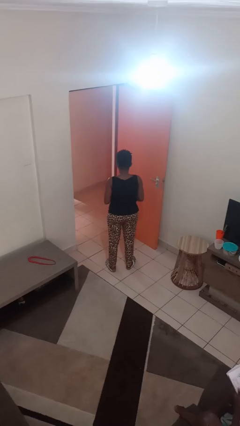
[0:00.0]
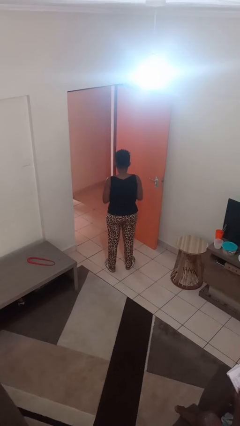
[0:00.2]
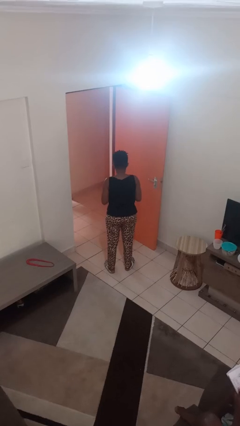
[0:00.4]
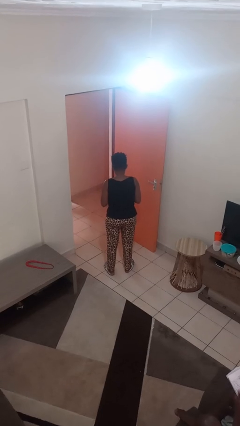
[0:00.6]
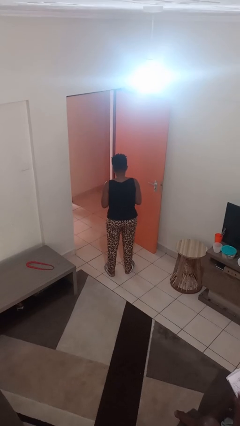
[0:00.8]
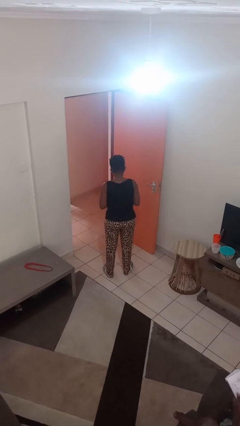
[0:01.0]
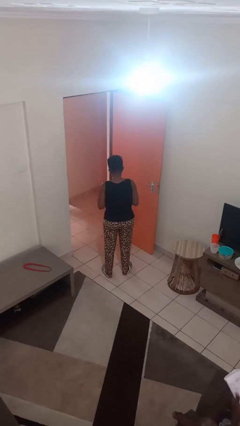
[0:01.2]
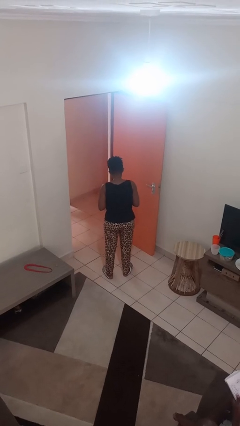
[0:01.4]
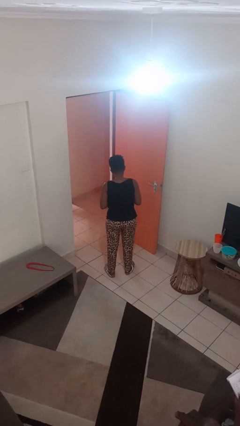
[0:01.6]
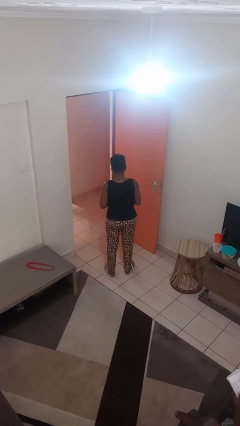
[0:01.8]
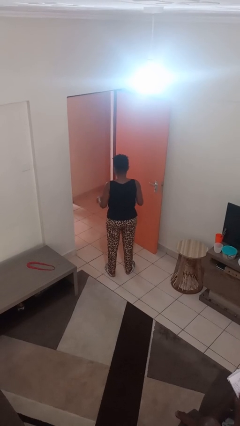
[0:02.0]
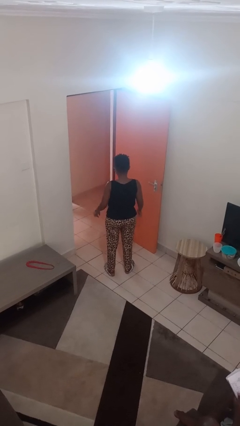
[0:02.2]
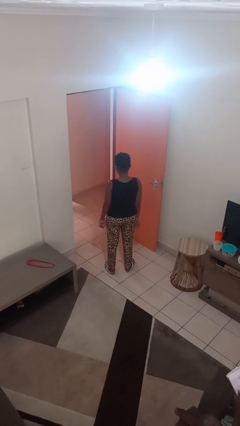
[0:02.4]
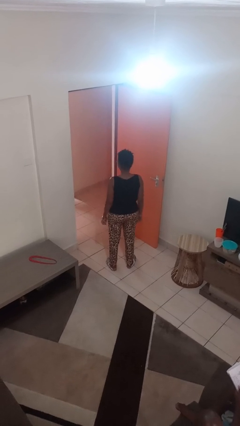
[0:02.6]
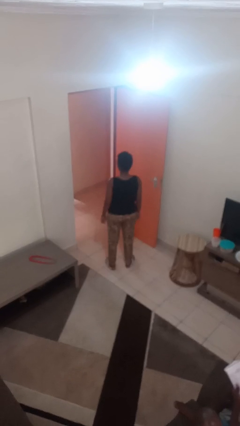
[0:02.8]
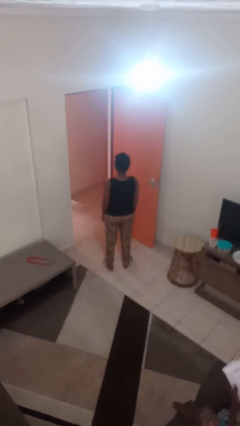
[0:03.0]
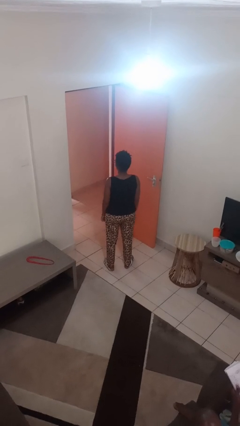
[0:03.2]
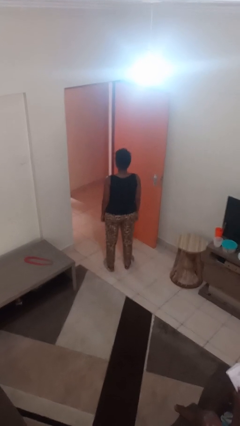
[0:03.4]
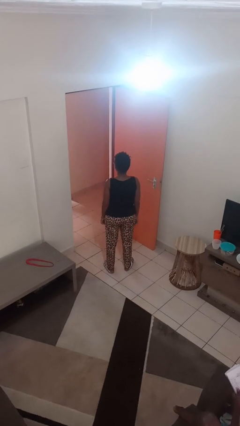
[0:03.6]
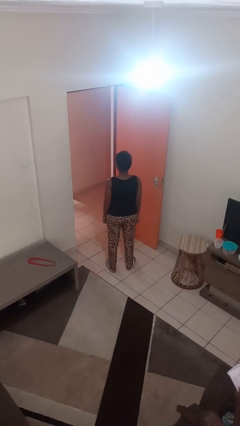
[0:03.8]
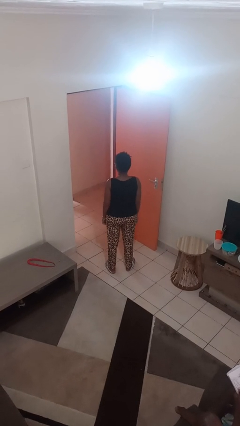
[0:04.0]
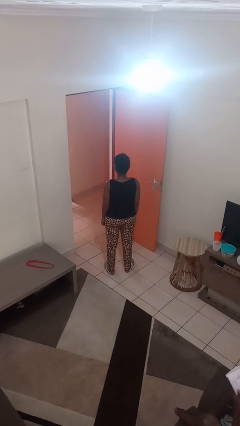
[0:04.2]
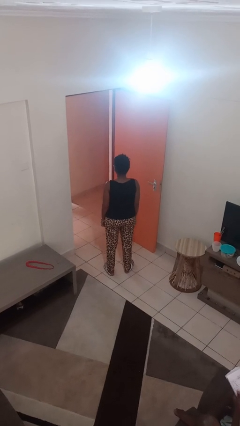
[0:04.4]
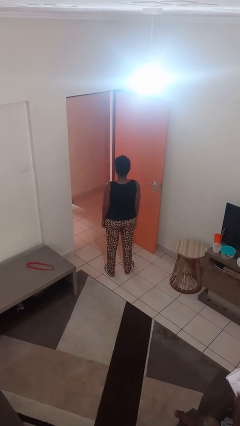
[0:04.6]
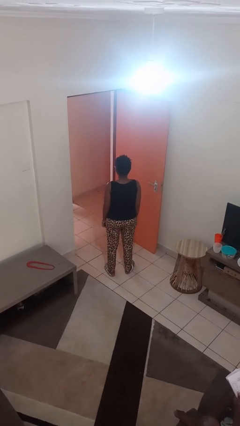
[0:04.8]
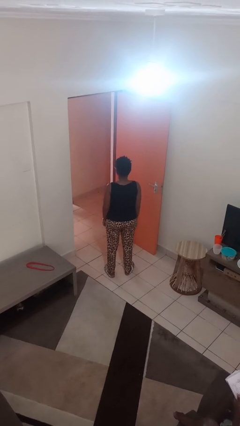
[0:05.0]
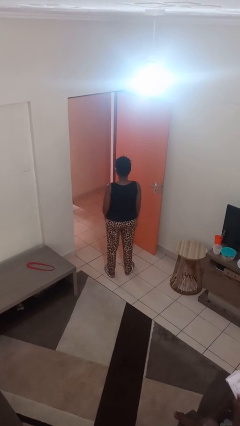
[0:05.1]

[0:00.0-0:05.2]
person puts on ring

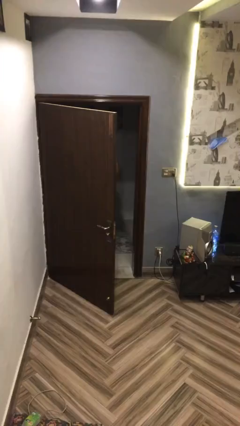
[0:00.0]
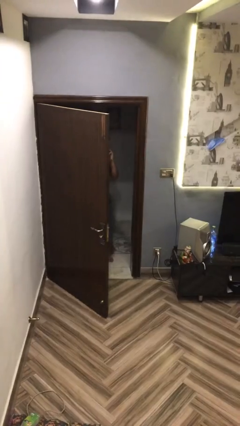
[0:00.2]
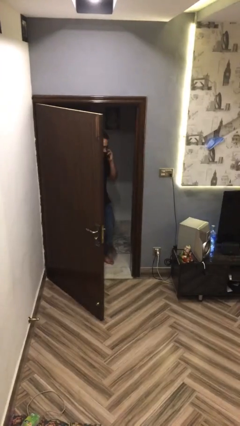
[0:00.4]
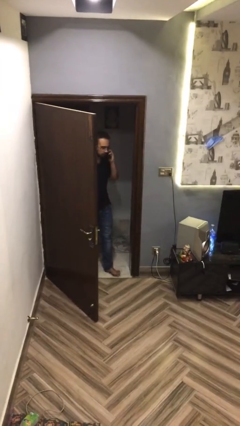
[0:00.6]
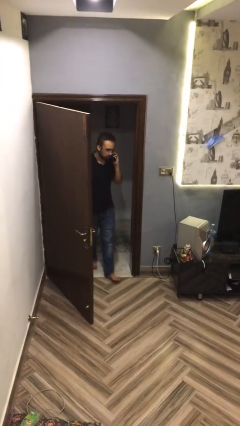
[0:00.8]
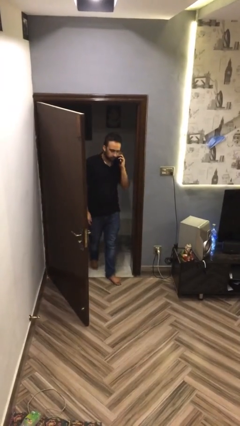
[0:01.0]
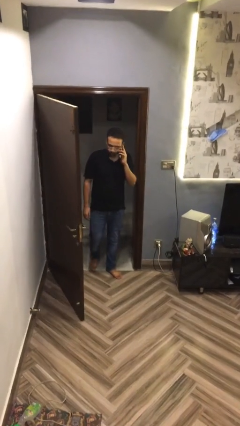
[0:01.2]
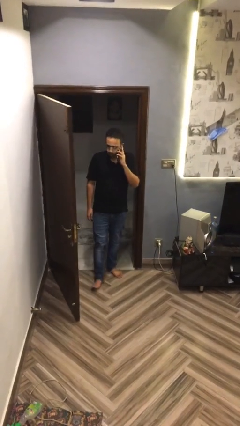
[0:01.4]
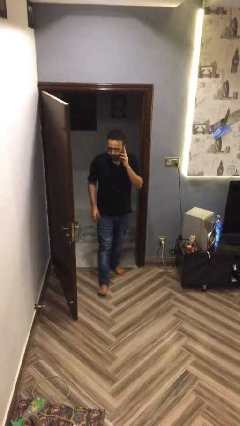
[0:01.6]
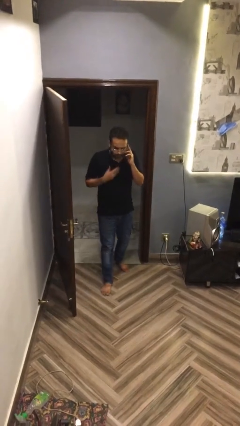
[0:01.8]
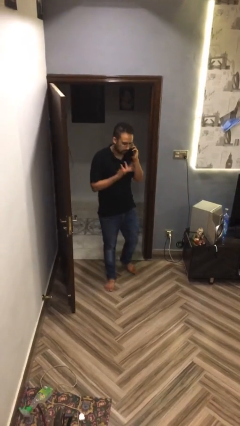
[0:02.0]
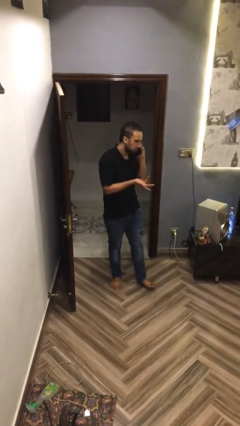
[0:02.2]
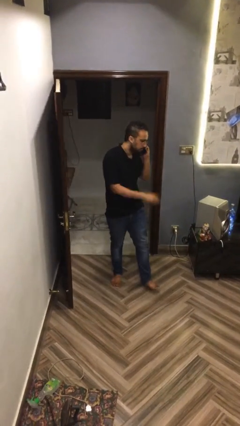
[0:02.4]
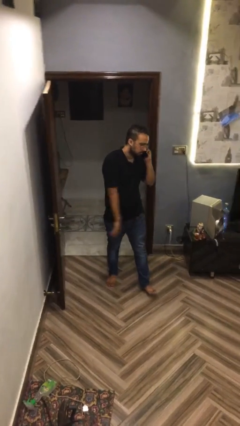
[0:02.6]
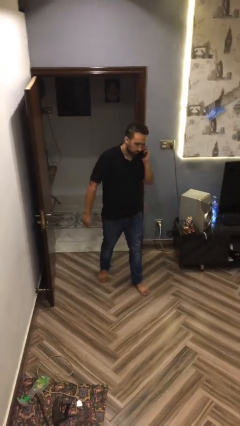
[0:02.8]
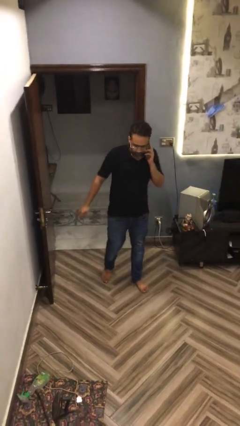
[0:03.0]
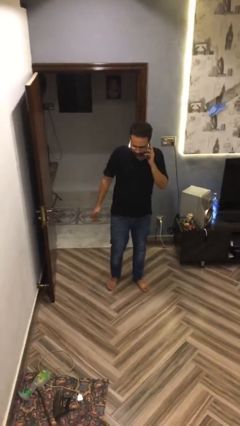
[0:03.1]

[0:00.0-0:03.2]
person enters scene through structure

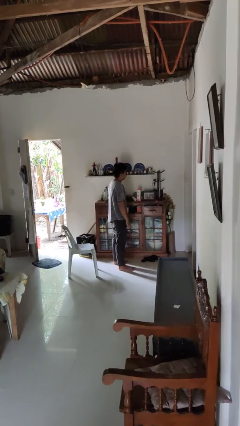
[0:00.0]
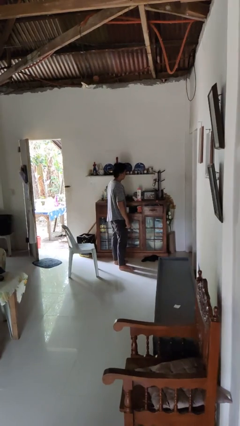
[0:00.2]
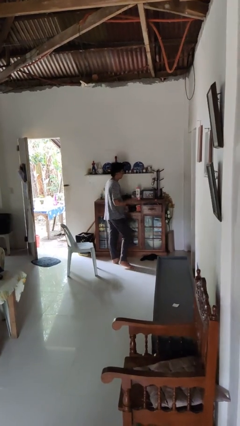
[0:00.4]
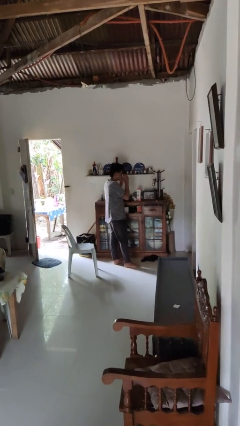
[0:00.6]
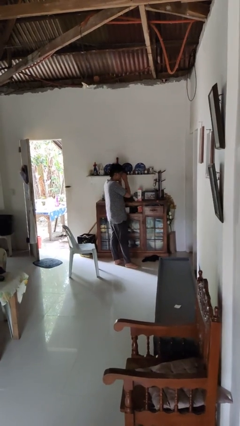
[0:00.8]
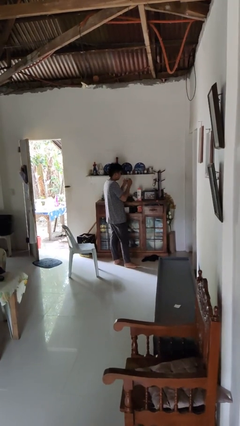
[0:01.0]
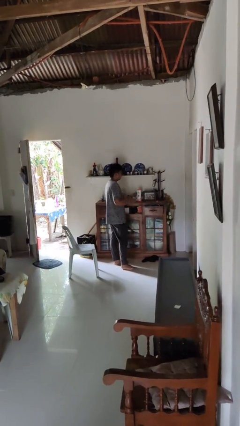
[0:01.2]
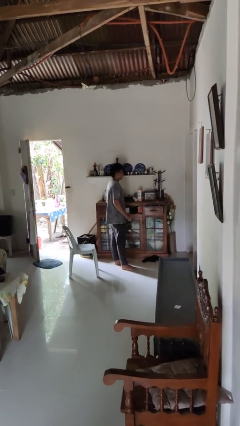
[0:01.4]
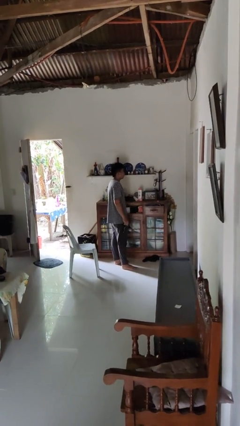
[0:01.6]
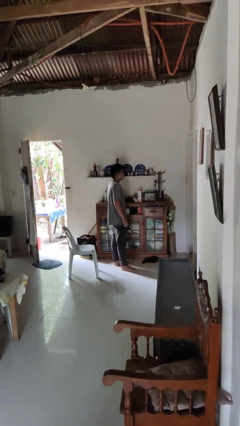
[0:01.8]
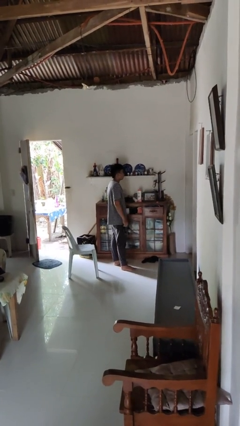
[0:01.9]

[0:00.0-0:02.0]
person takes off sunglasses

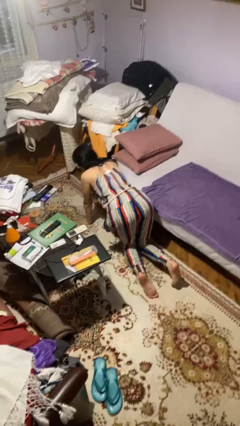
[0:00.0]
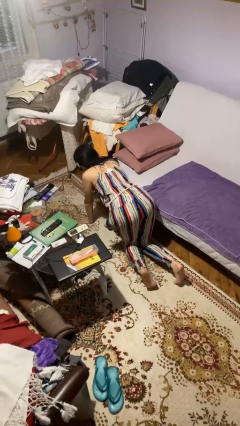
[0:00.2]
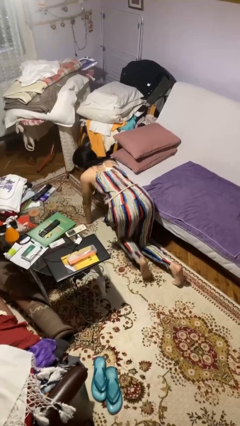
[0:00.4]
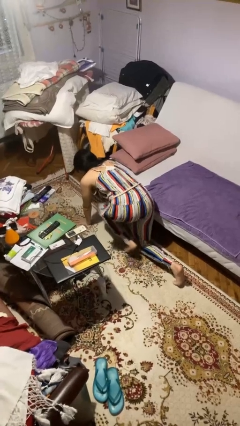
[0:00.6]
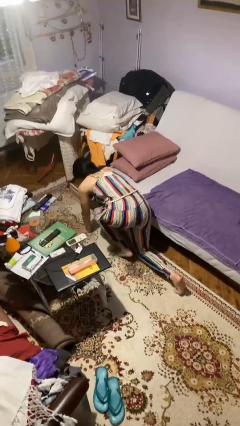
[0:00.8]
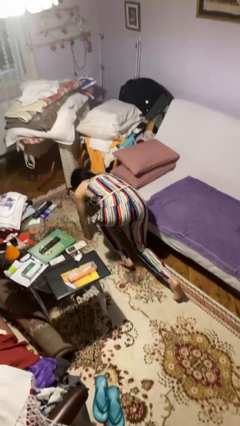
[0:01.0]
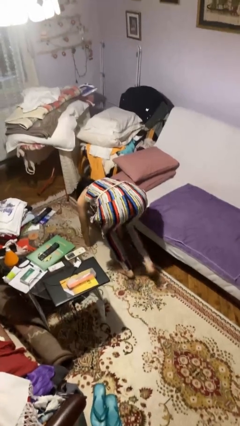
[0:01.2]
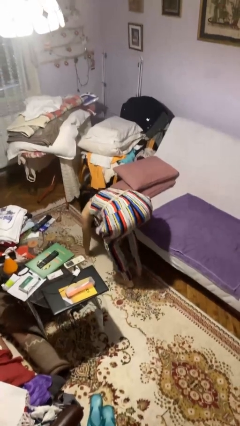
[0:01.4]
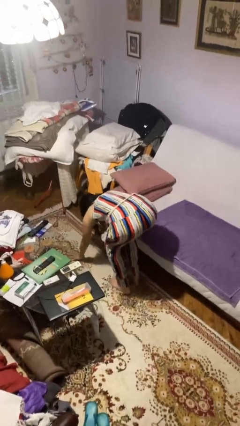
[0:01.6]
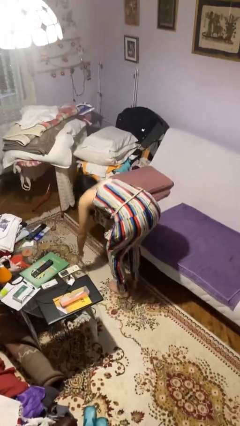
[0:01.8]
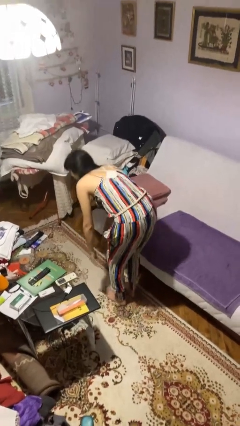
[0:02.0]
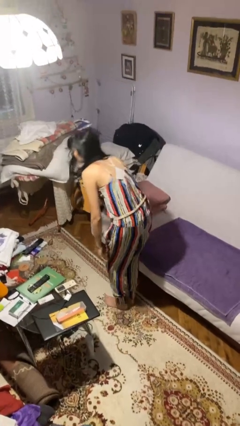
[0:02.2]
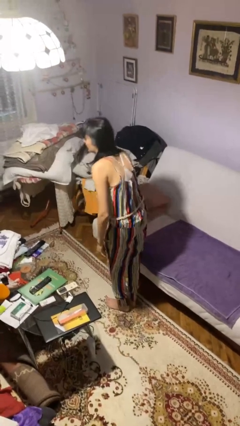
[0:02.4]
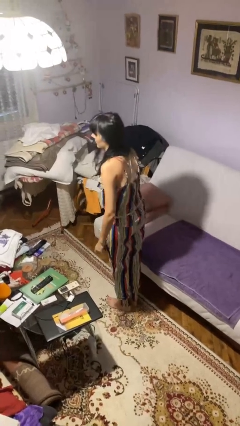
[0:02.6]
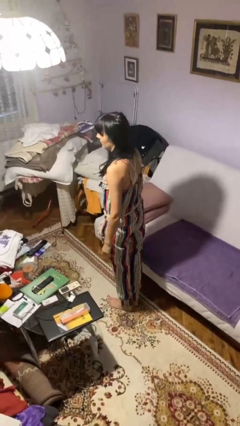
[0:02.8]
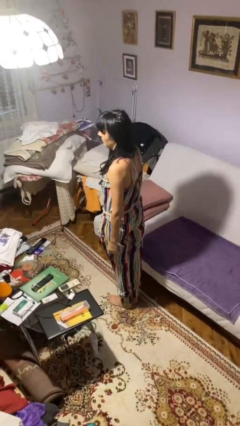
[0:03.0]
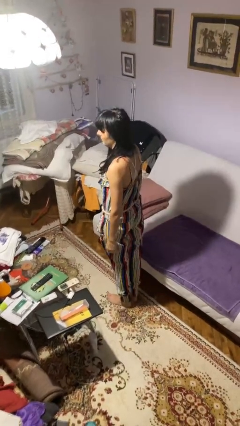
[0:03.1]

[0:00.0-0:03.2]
person stands up from floor

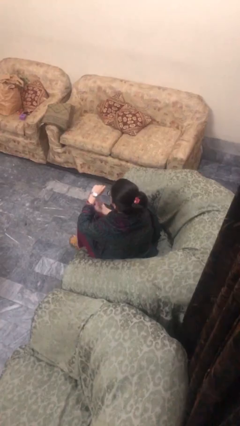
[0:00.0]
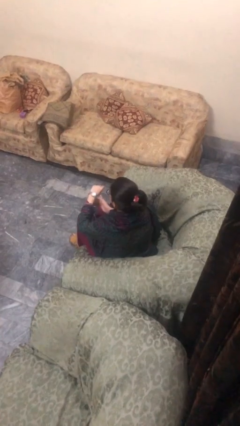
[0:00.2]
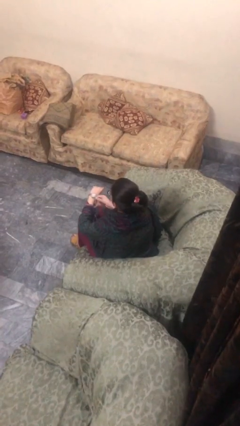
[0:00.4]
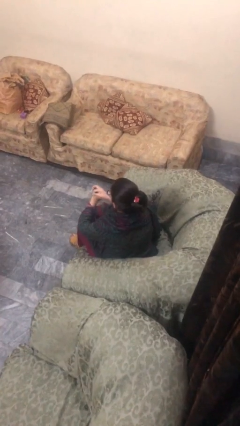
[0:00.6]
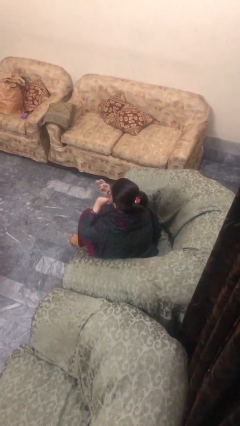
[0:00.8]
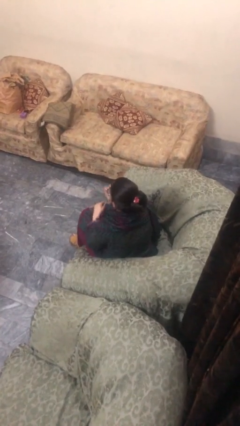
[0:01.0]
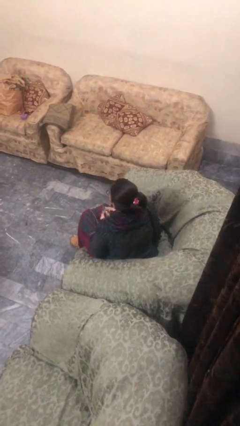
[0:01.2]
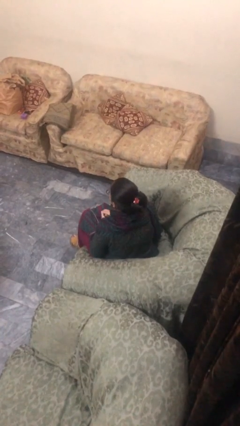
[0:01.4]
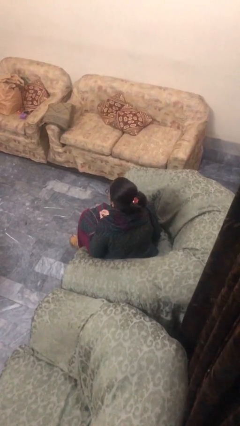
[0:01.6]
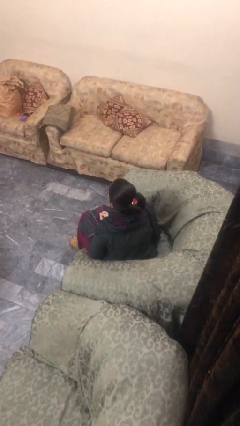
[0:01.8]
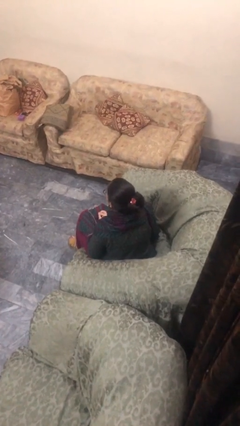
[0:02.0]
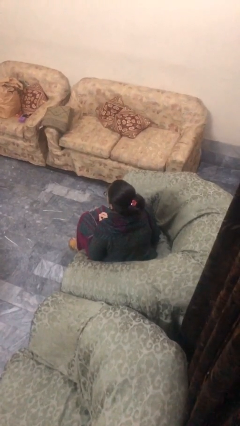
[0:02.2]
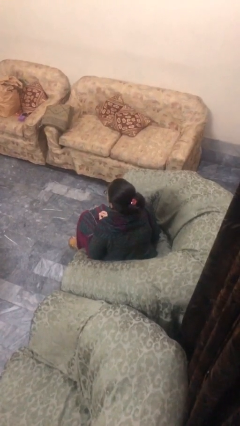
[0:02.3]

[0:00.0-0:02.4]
person takes off wristwatch

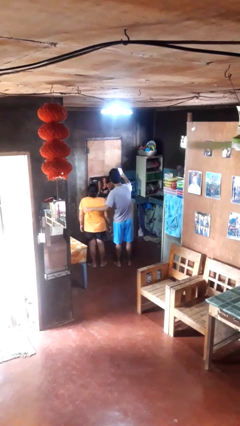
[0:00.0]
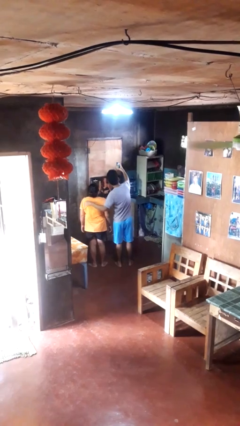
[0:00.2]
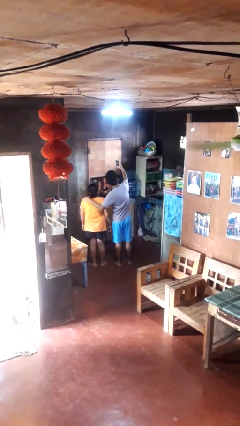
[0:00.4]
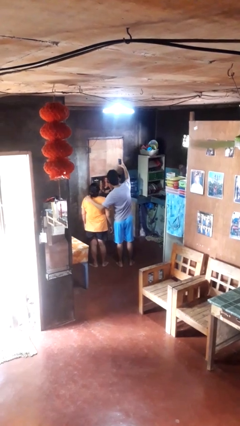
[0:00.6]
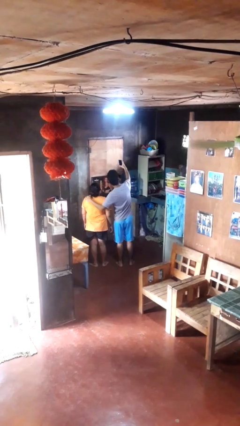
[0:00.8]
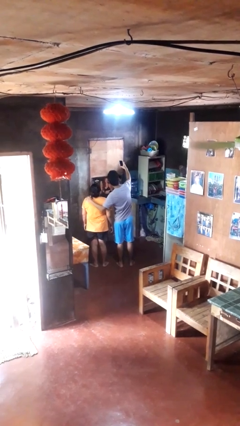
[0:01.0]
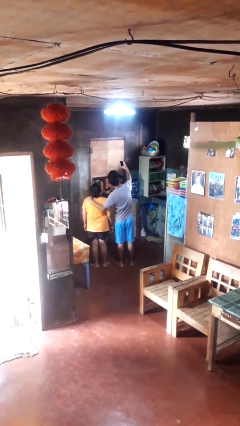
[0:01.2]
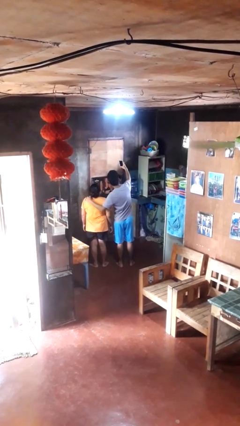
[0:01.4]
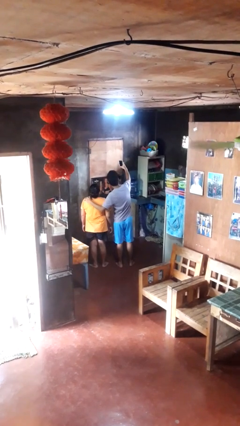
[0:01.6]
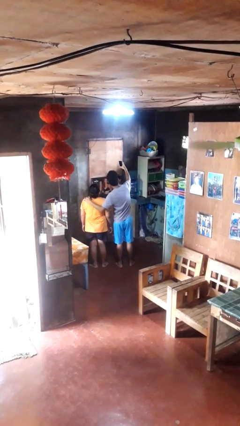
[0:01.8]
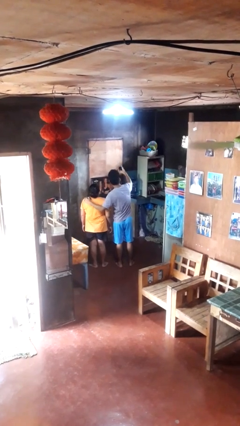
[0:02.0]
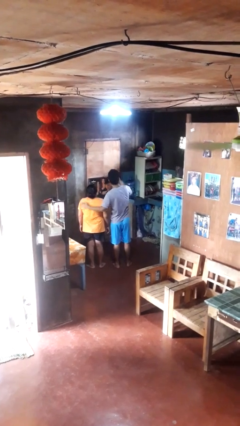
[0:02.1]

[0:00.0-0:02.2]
person takes selfie with person
